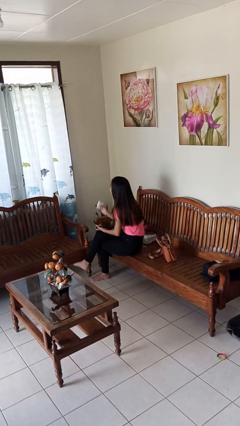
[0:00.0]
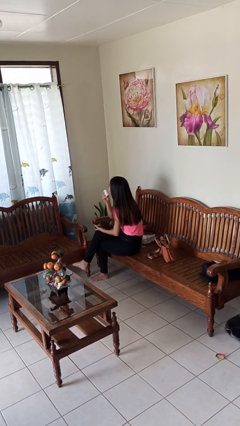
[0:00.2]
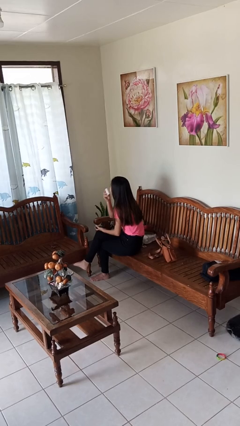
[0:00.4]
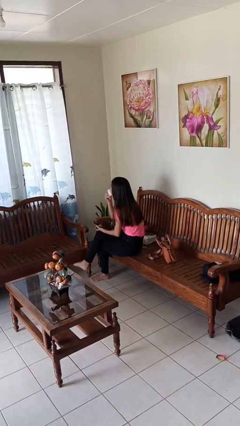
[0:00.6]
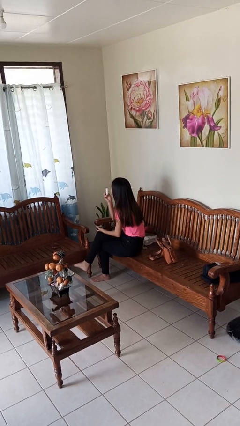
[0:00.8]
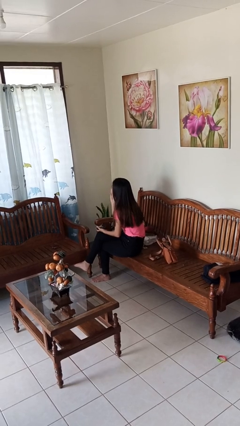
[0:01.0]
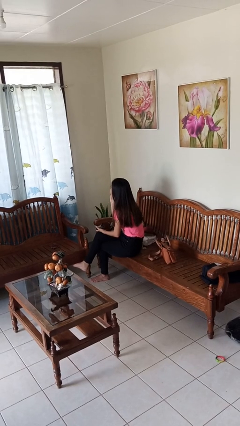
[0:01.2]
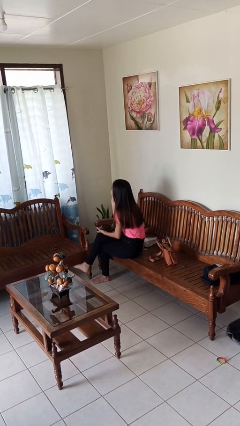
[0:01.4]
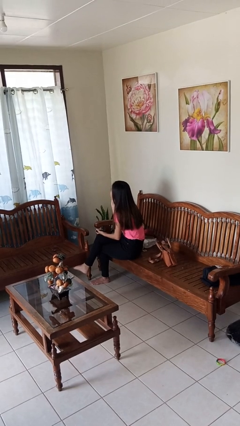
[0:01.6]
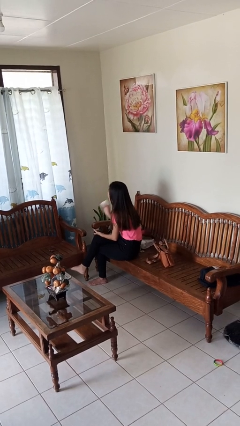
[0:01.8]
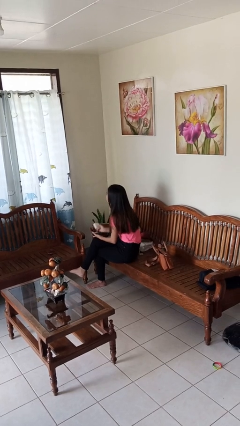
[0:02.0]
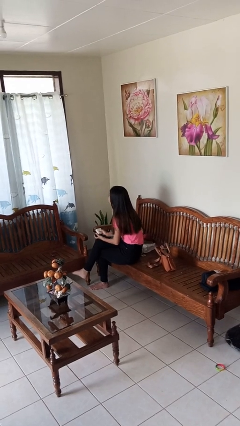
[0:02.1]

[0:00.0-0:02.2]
person applies foundation makeup

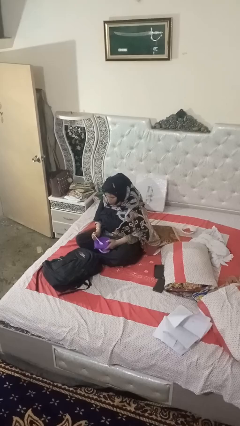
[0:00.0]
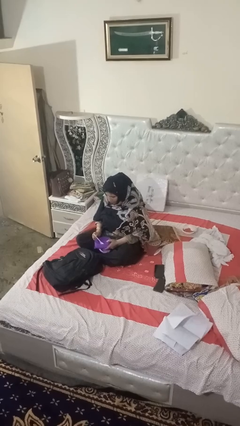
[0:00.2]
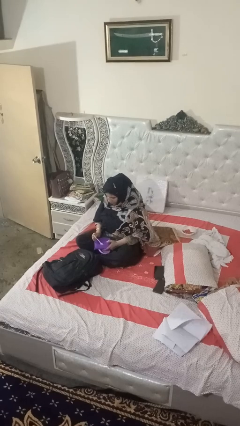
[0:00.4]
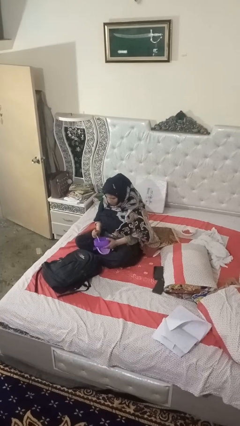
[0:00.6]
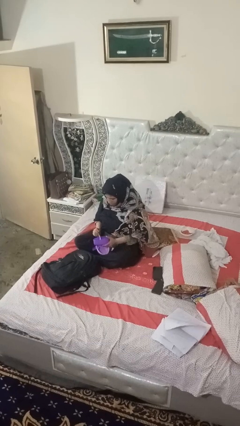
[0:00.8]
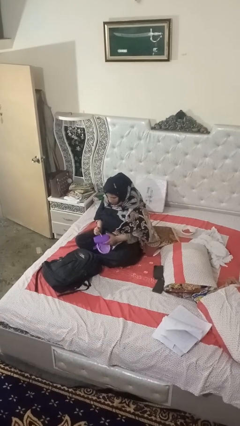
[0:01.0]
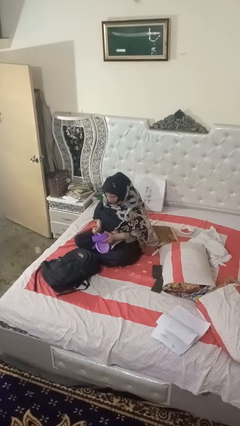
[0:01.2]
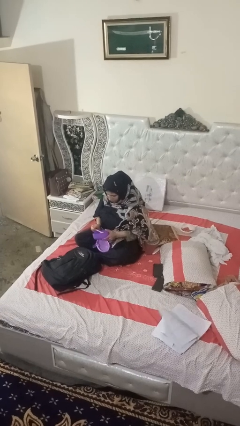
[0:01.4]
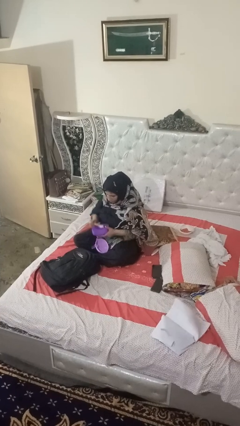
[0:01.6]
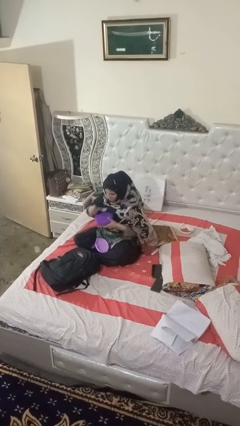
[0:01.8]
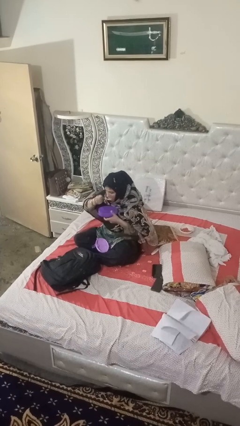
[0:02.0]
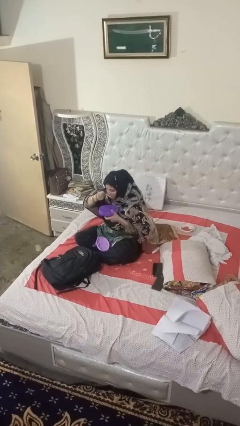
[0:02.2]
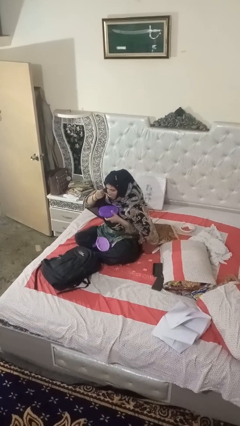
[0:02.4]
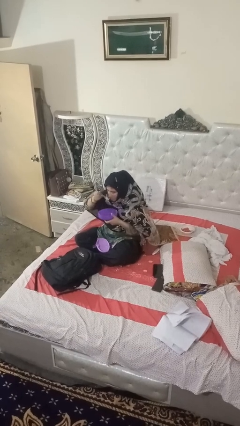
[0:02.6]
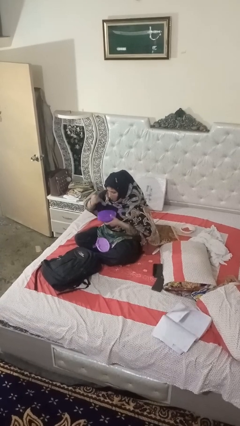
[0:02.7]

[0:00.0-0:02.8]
person eats snack from bag

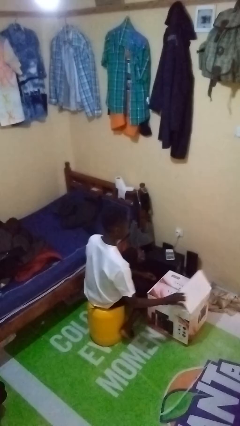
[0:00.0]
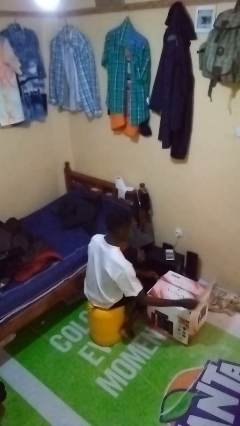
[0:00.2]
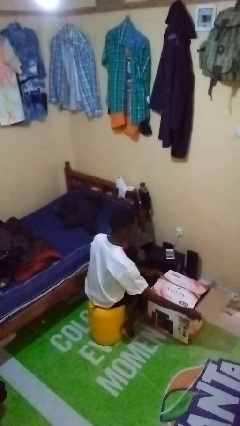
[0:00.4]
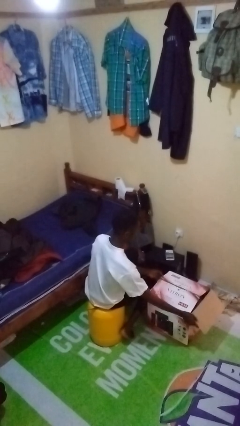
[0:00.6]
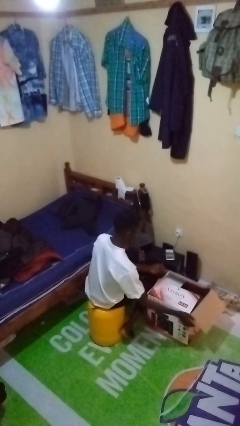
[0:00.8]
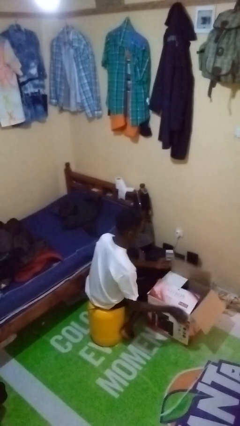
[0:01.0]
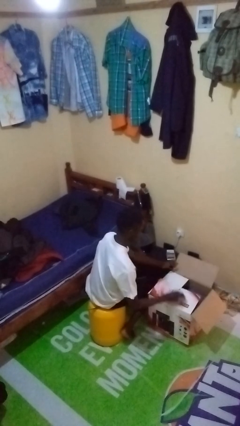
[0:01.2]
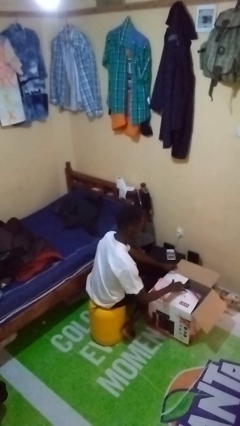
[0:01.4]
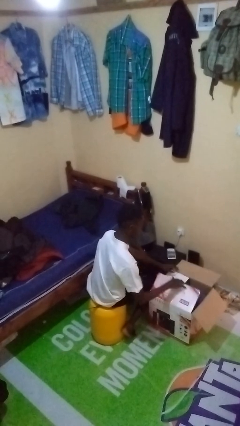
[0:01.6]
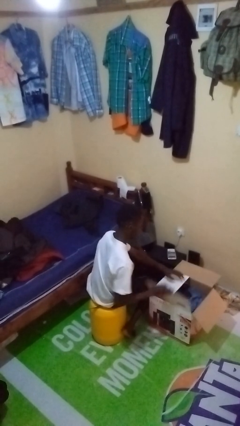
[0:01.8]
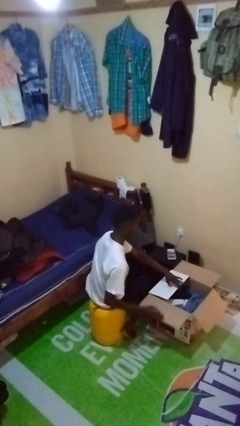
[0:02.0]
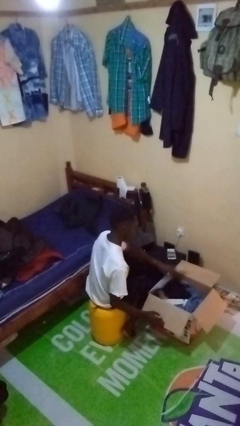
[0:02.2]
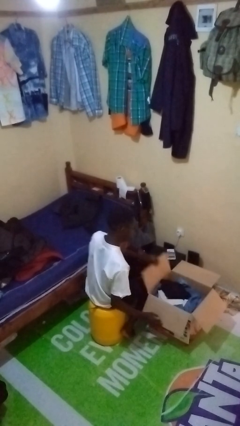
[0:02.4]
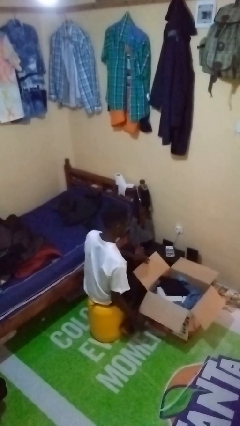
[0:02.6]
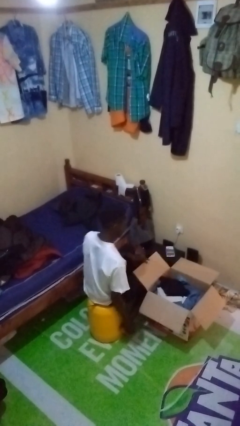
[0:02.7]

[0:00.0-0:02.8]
person opens box

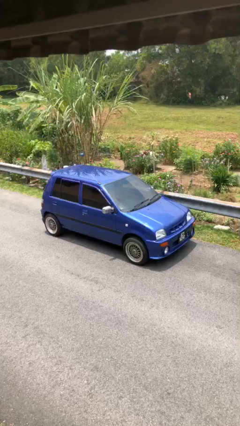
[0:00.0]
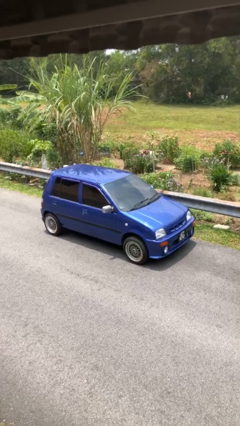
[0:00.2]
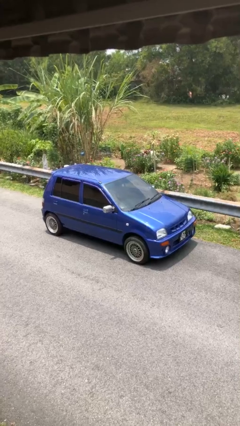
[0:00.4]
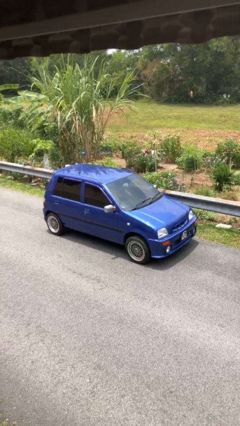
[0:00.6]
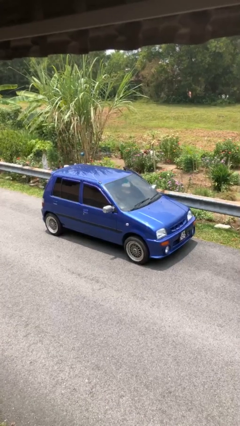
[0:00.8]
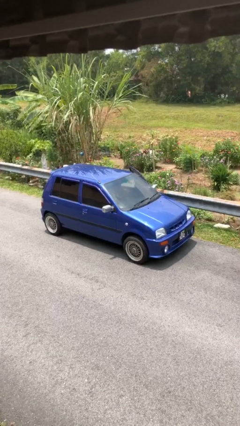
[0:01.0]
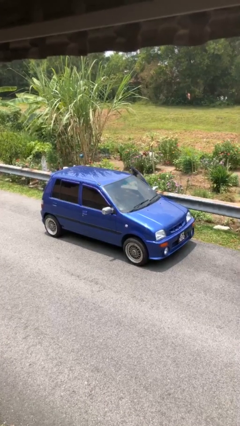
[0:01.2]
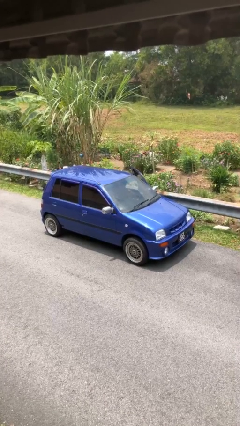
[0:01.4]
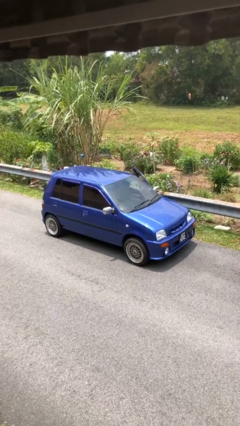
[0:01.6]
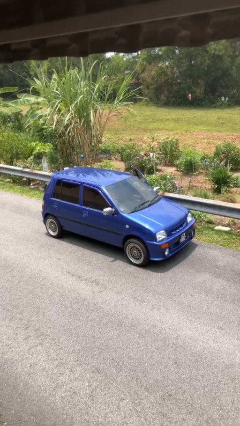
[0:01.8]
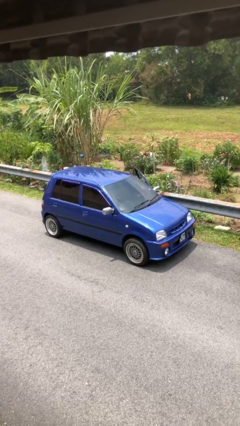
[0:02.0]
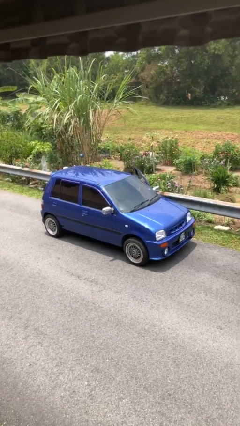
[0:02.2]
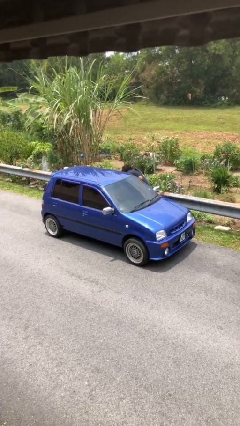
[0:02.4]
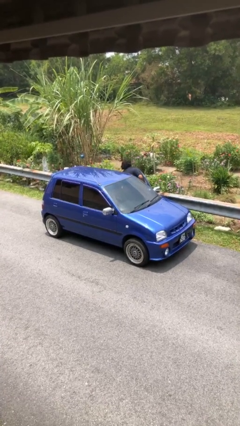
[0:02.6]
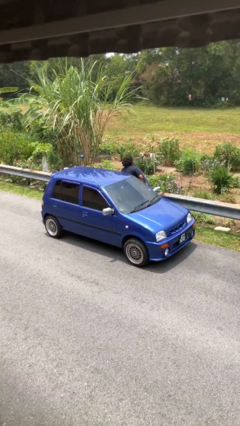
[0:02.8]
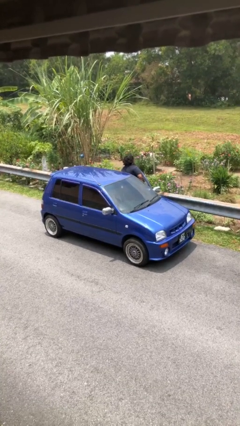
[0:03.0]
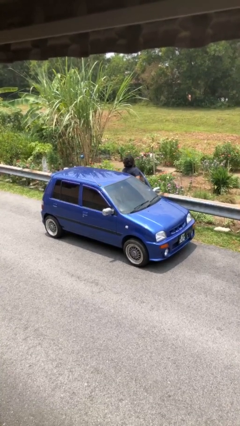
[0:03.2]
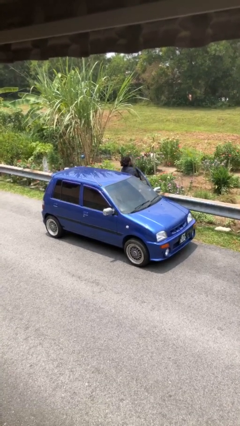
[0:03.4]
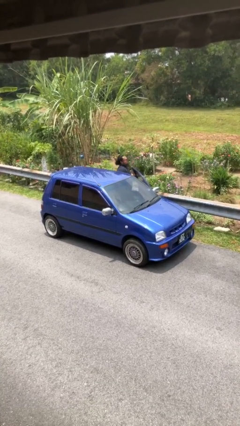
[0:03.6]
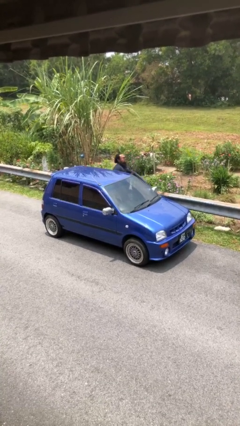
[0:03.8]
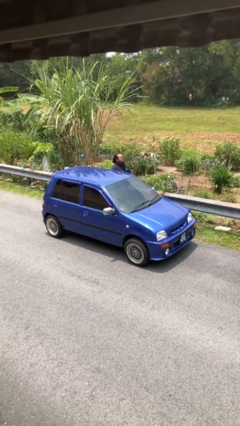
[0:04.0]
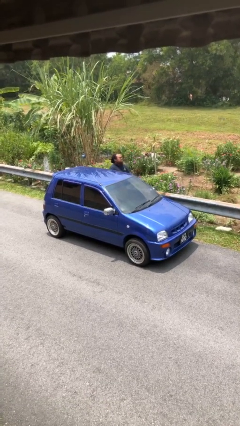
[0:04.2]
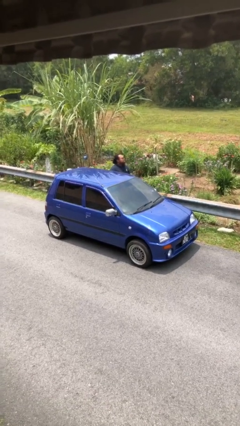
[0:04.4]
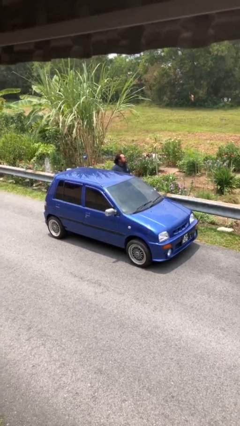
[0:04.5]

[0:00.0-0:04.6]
car drops off person

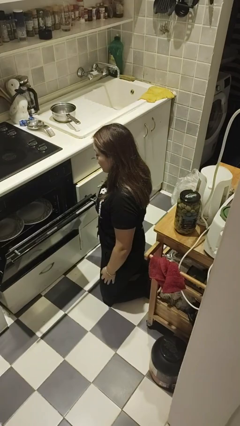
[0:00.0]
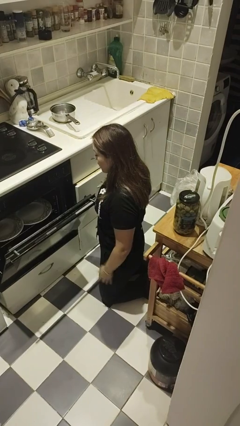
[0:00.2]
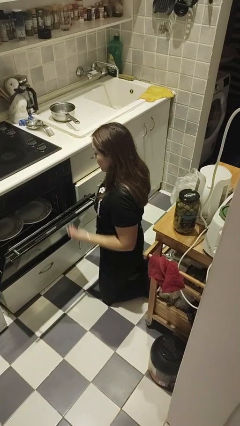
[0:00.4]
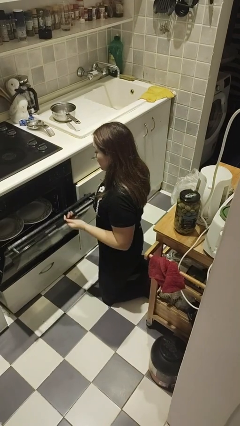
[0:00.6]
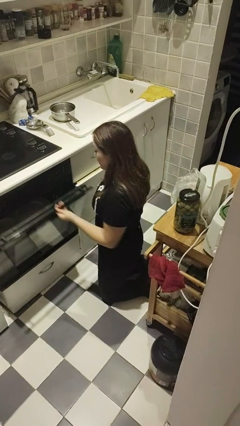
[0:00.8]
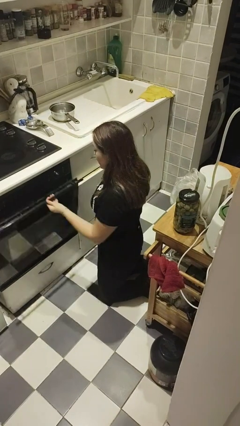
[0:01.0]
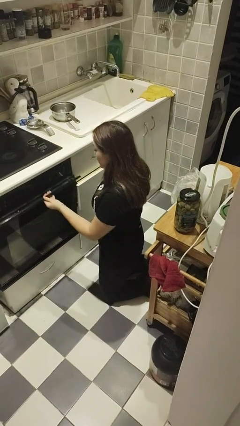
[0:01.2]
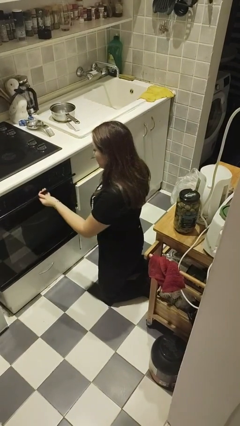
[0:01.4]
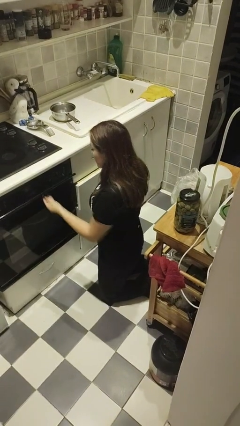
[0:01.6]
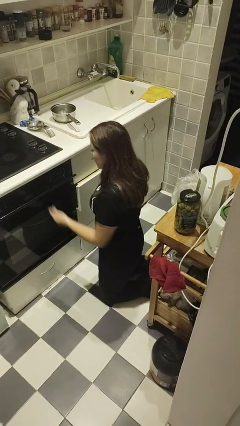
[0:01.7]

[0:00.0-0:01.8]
person closes oven door

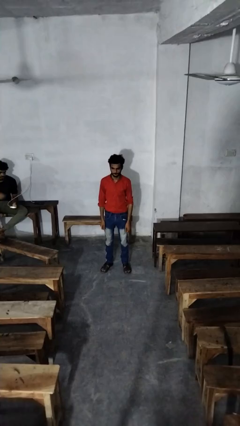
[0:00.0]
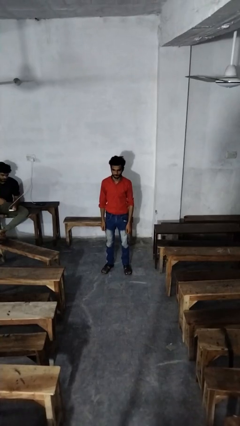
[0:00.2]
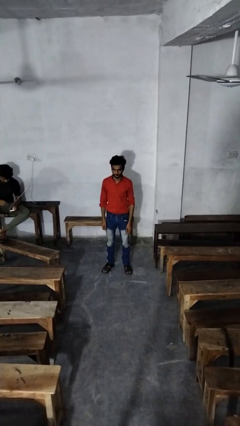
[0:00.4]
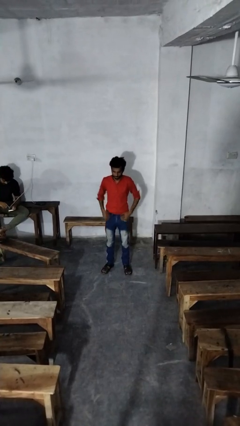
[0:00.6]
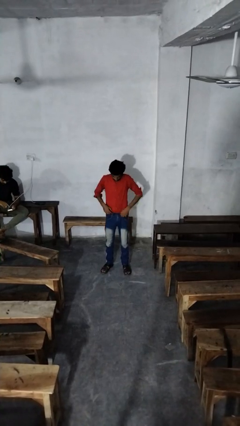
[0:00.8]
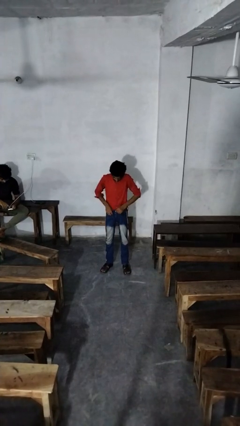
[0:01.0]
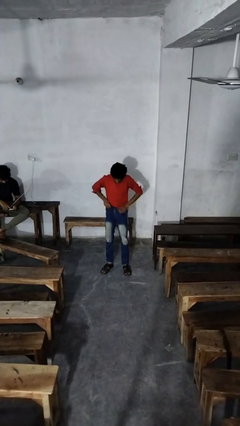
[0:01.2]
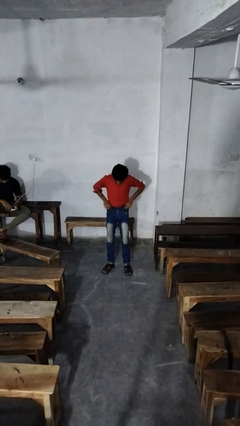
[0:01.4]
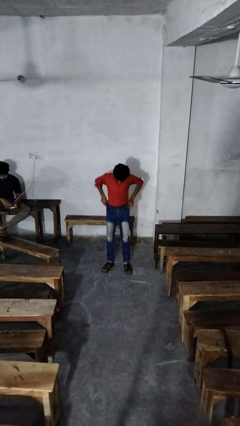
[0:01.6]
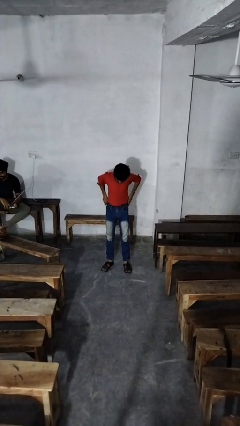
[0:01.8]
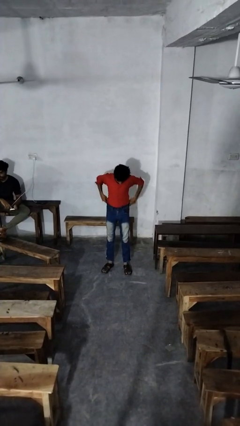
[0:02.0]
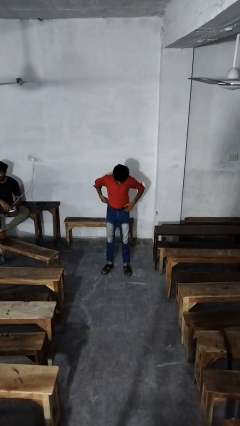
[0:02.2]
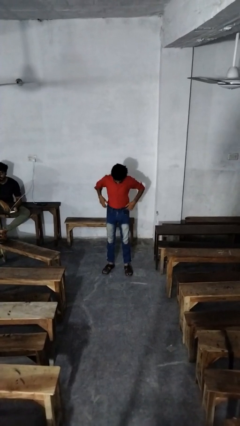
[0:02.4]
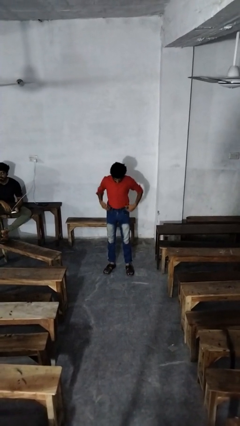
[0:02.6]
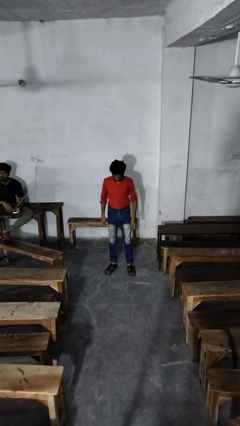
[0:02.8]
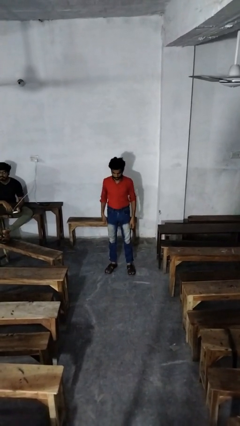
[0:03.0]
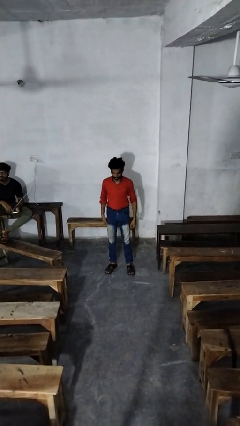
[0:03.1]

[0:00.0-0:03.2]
person hikes up pants

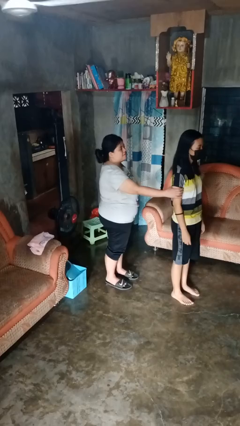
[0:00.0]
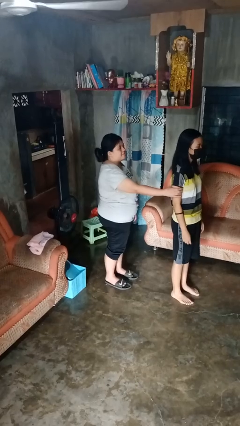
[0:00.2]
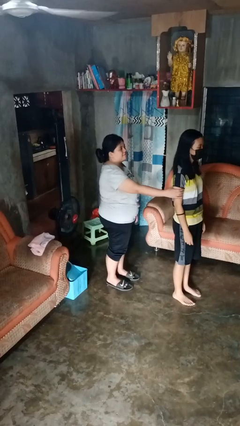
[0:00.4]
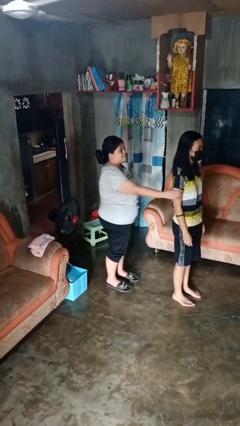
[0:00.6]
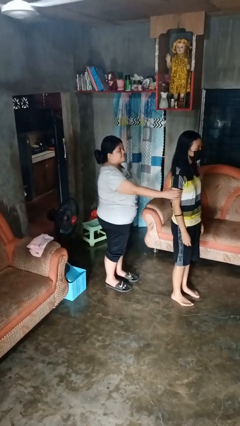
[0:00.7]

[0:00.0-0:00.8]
person grabs person by shoulder
